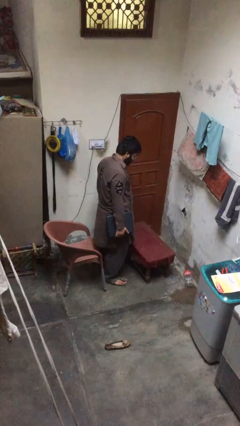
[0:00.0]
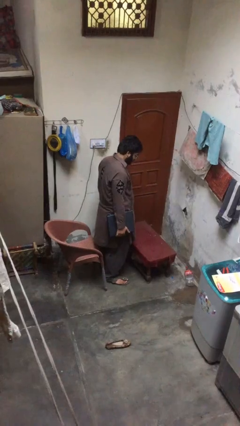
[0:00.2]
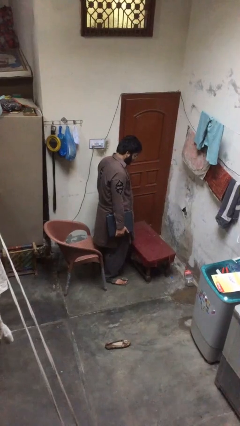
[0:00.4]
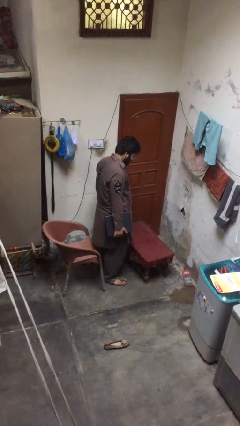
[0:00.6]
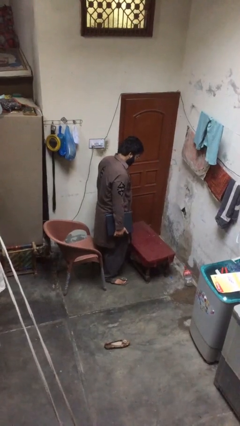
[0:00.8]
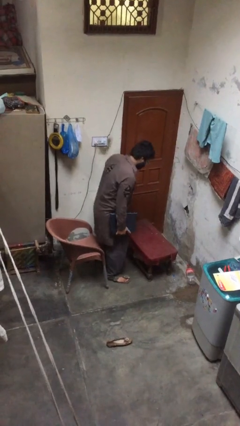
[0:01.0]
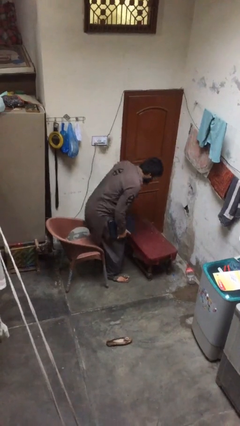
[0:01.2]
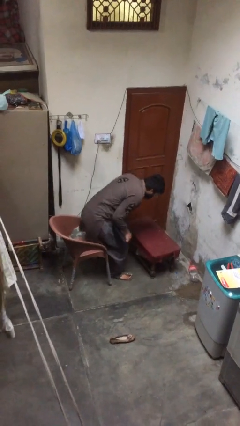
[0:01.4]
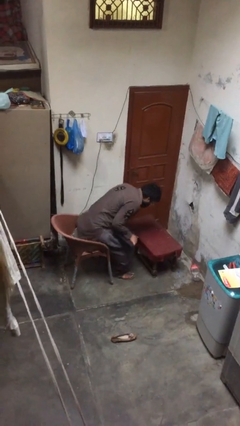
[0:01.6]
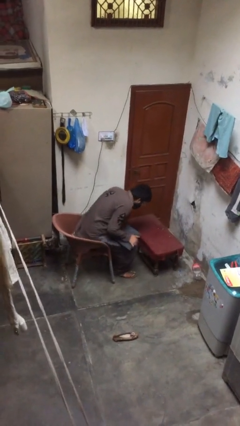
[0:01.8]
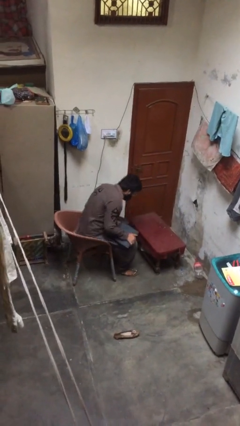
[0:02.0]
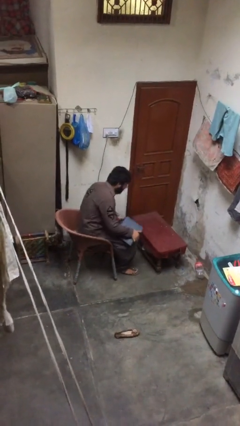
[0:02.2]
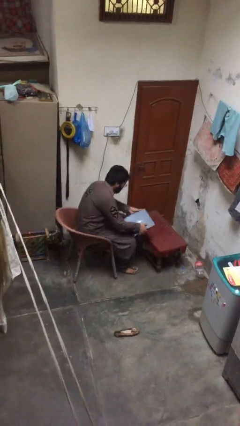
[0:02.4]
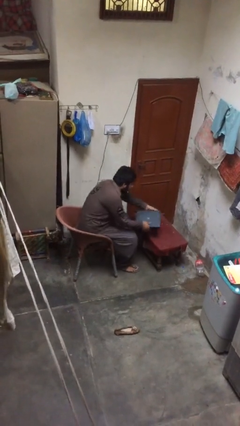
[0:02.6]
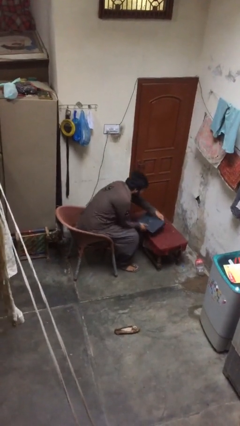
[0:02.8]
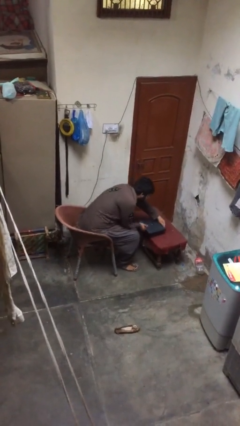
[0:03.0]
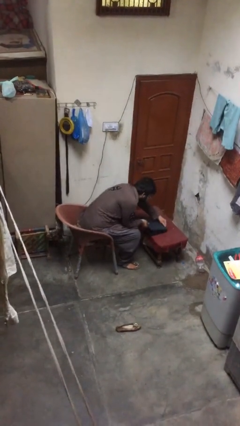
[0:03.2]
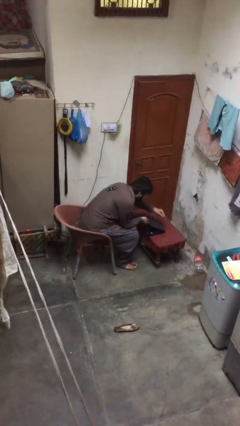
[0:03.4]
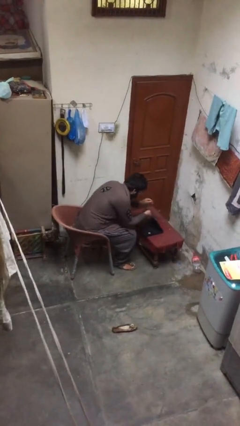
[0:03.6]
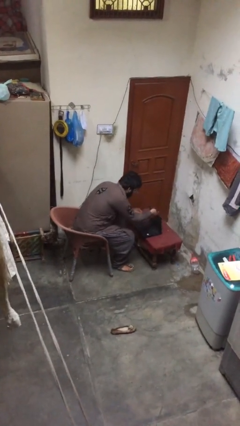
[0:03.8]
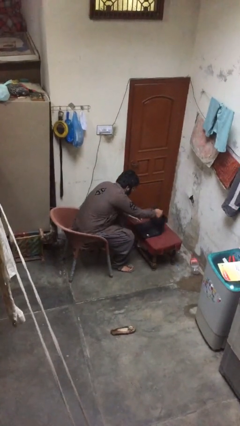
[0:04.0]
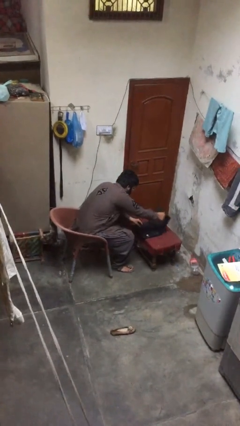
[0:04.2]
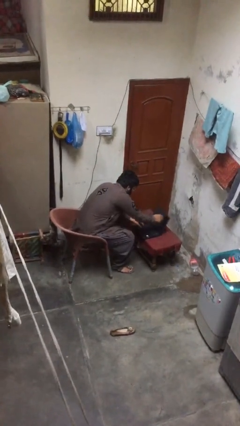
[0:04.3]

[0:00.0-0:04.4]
person sits down

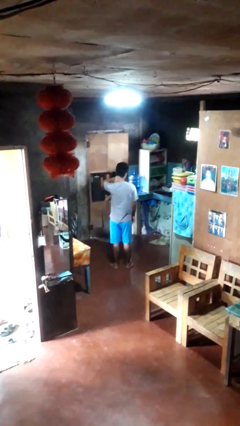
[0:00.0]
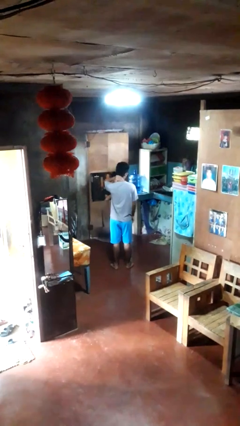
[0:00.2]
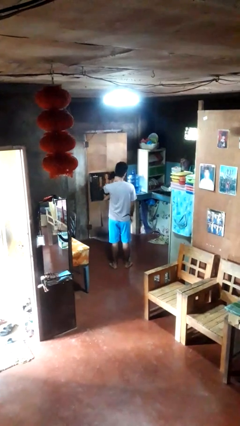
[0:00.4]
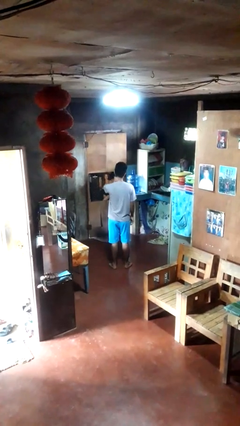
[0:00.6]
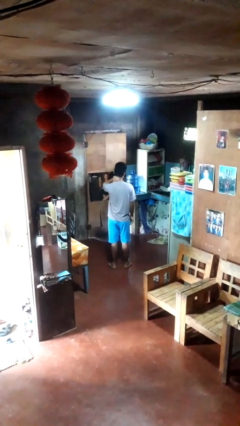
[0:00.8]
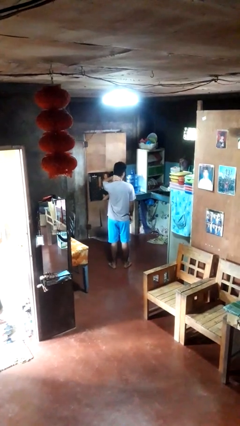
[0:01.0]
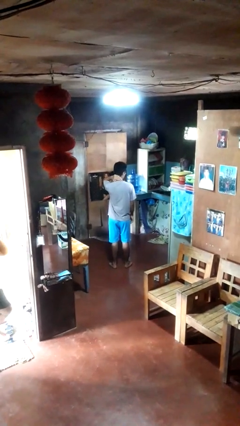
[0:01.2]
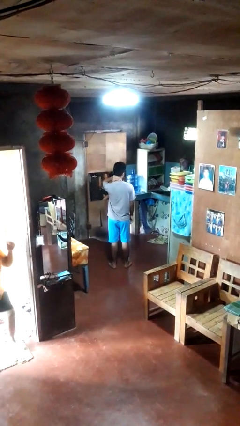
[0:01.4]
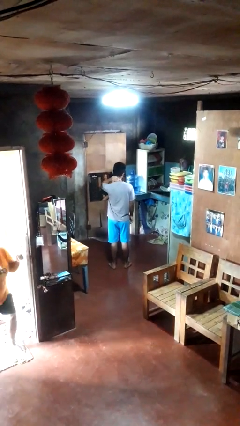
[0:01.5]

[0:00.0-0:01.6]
person rubs neck

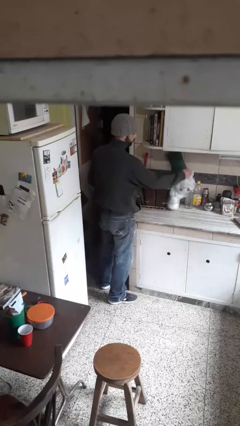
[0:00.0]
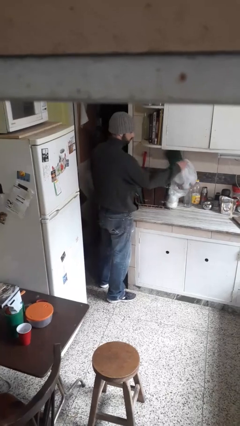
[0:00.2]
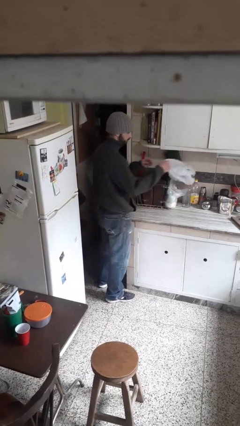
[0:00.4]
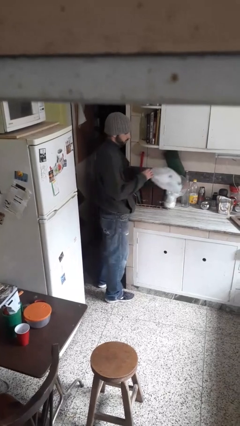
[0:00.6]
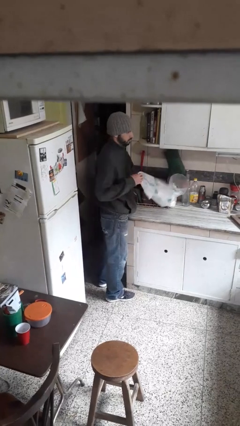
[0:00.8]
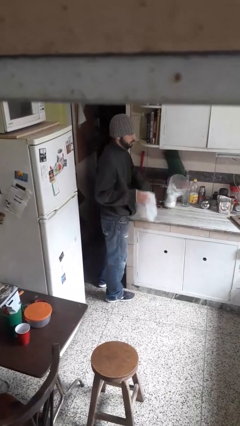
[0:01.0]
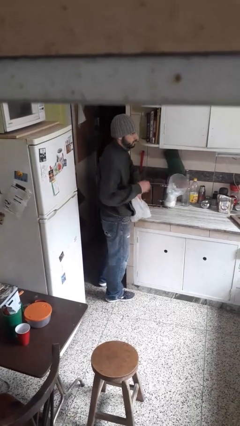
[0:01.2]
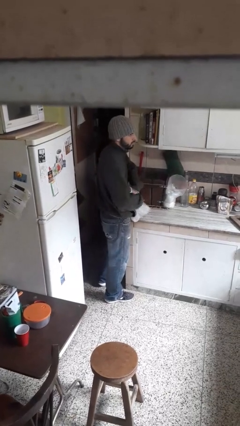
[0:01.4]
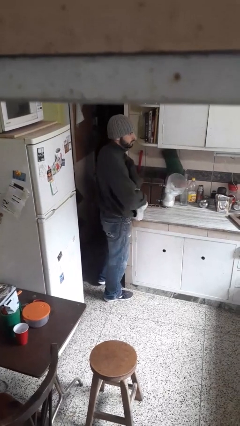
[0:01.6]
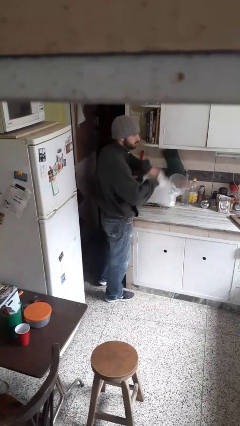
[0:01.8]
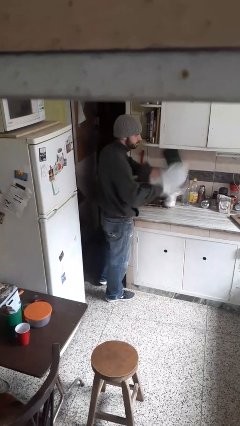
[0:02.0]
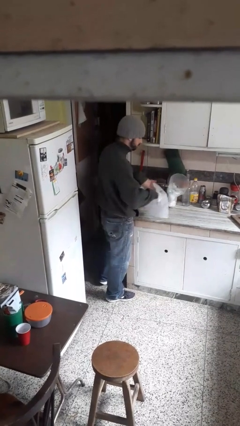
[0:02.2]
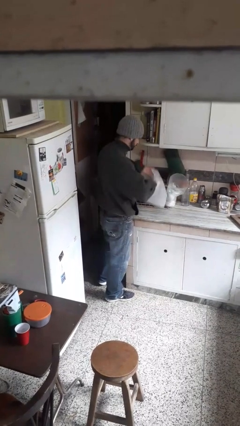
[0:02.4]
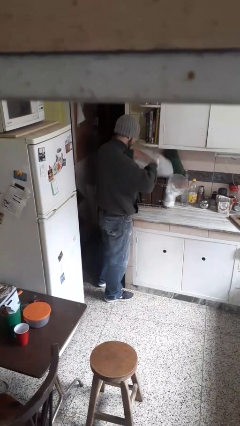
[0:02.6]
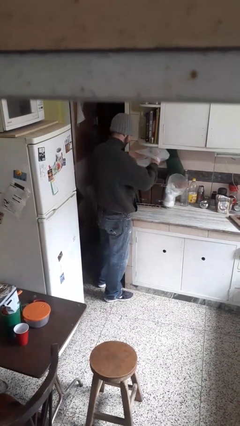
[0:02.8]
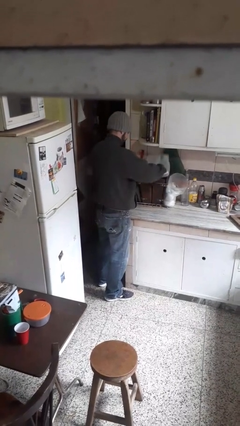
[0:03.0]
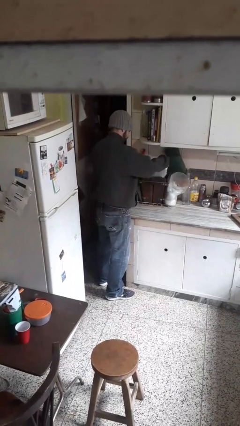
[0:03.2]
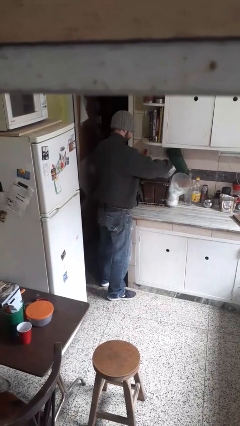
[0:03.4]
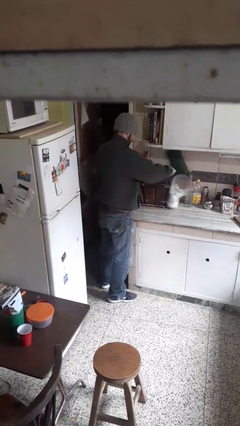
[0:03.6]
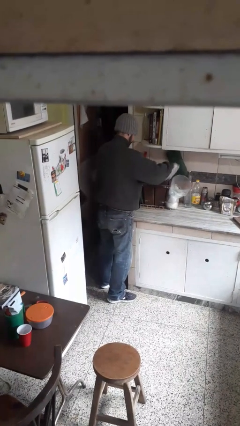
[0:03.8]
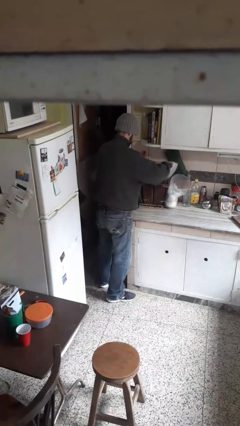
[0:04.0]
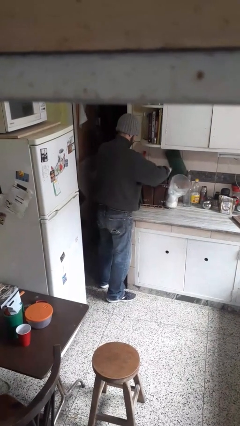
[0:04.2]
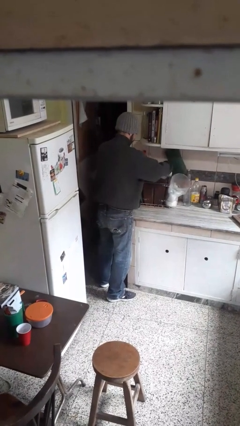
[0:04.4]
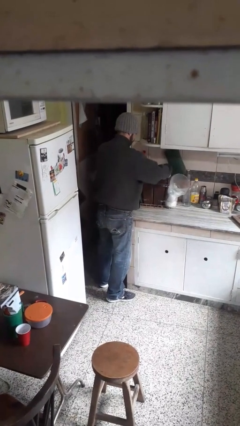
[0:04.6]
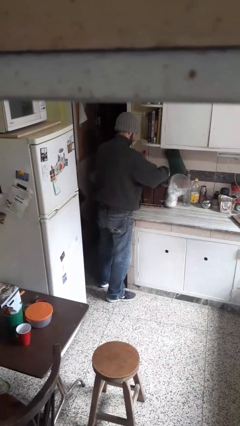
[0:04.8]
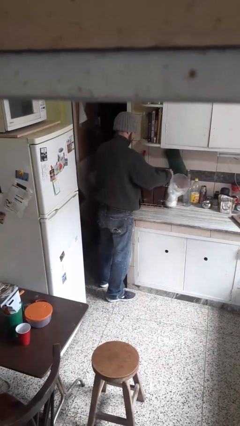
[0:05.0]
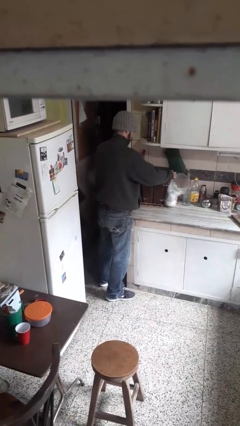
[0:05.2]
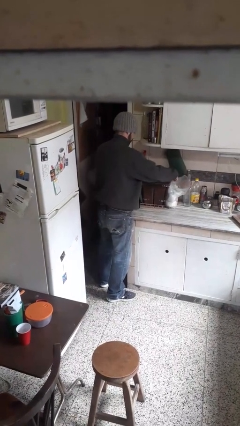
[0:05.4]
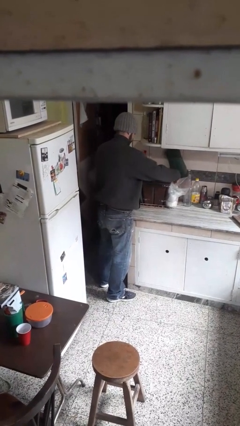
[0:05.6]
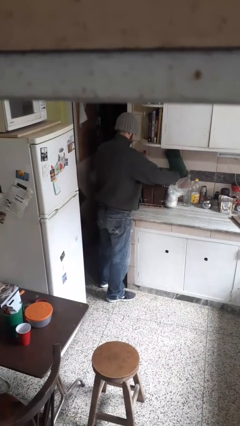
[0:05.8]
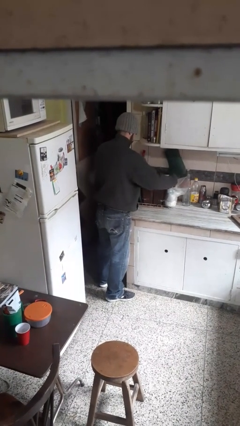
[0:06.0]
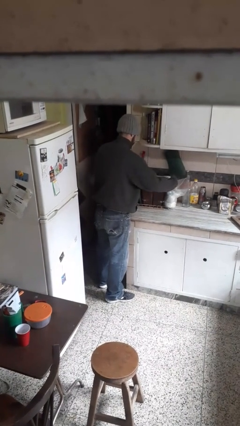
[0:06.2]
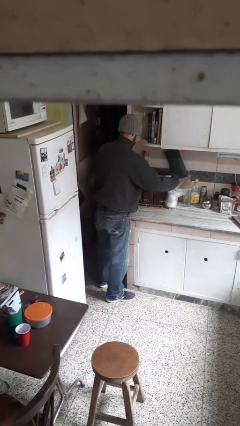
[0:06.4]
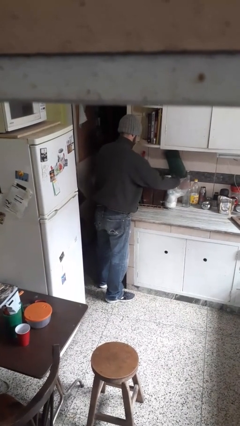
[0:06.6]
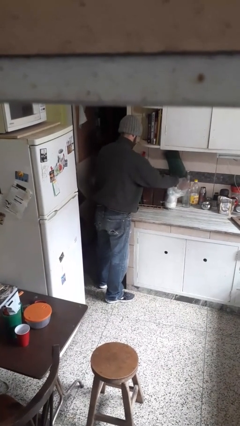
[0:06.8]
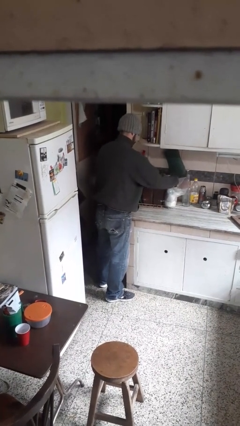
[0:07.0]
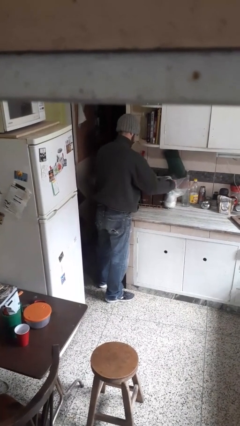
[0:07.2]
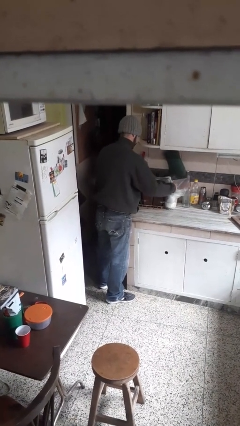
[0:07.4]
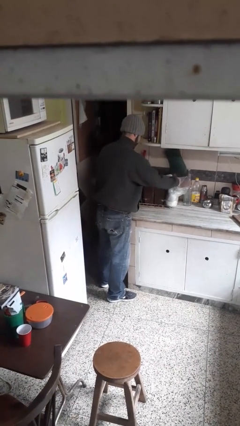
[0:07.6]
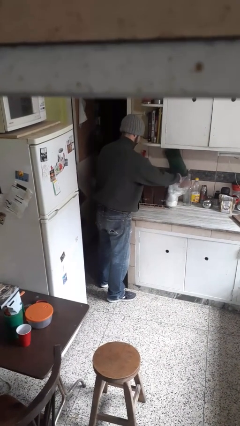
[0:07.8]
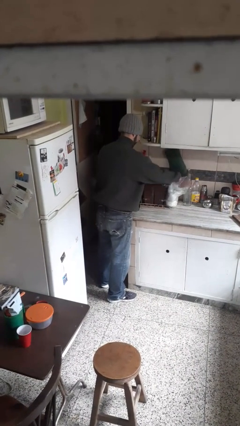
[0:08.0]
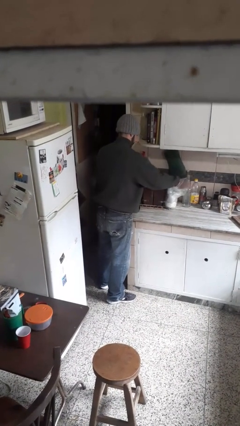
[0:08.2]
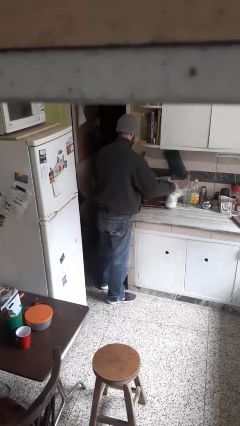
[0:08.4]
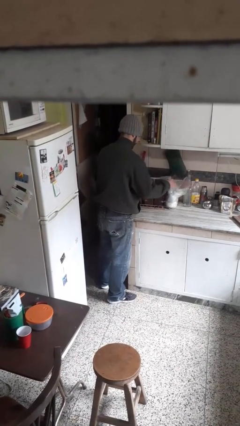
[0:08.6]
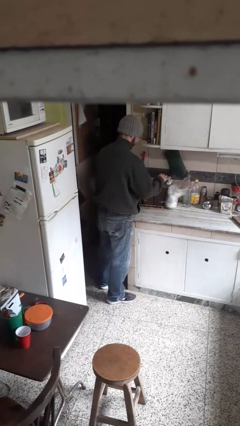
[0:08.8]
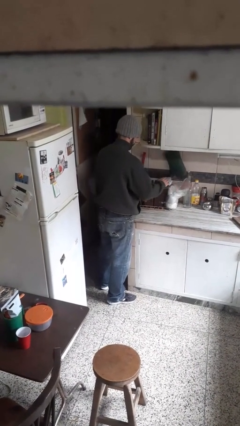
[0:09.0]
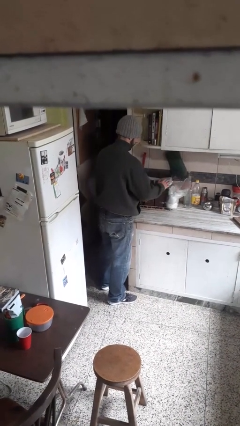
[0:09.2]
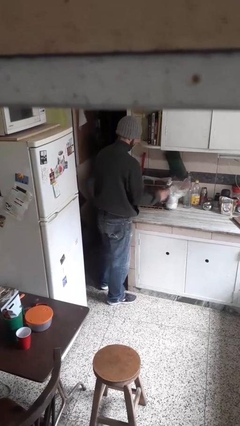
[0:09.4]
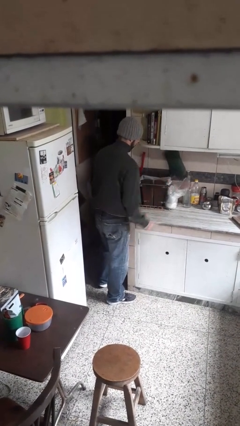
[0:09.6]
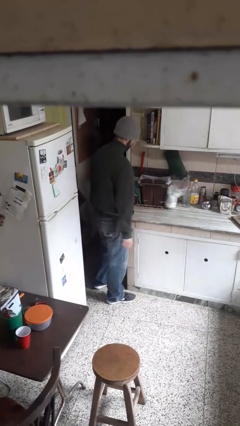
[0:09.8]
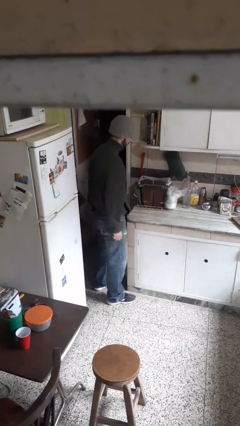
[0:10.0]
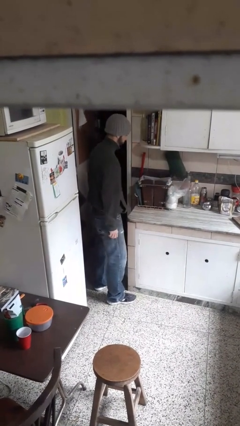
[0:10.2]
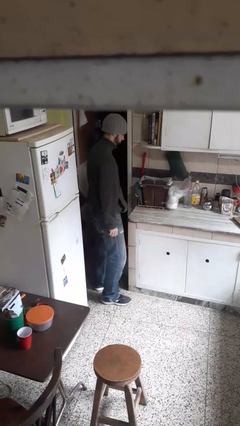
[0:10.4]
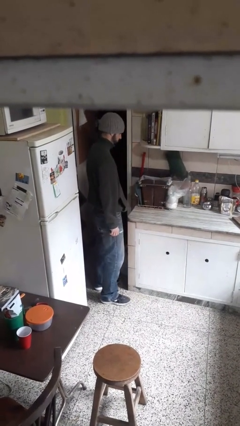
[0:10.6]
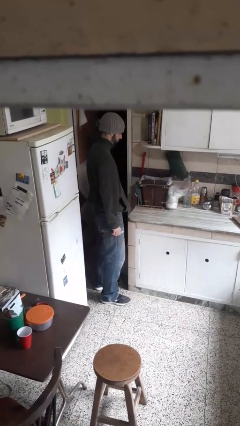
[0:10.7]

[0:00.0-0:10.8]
person inserts trashbag into trashcan

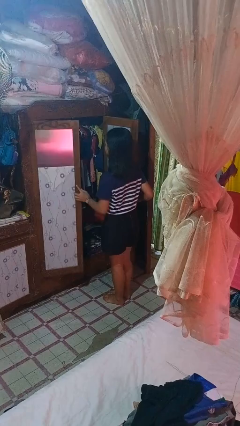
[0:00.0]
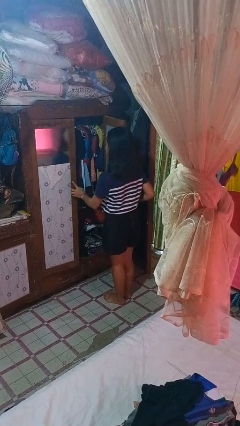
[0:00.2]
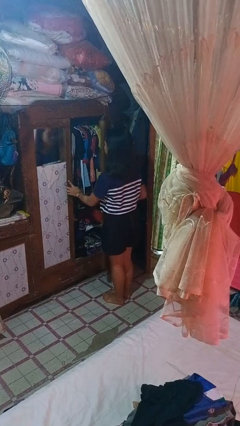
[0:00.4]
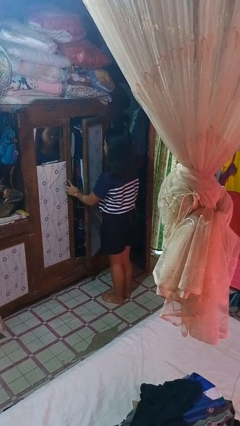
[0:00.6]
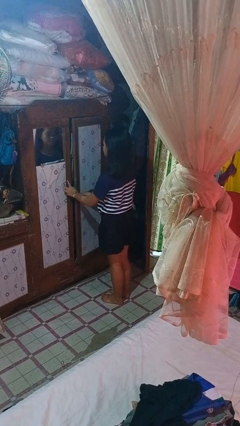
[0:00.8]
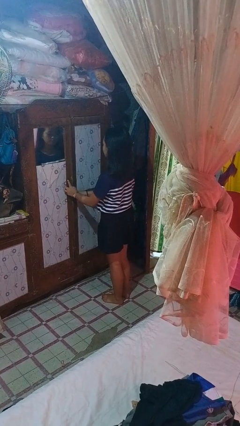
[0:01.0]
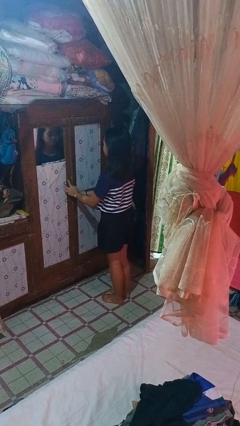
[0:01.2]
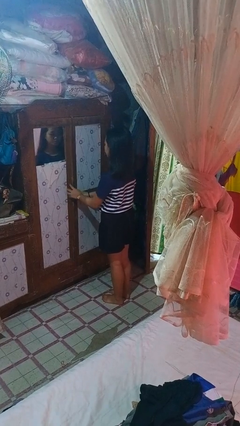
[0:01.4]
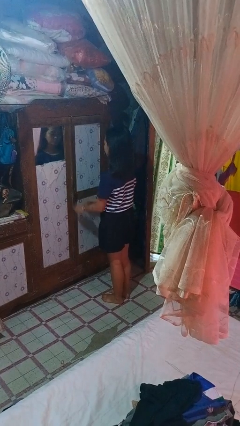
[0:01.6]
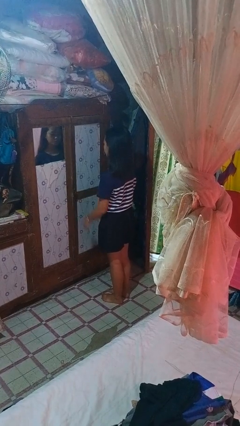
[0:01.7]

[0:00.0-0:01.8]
person closes closet door
